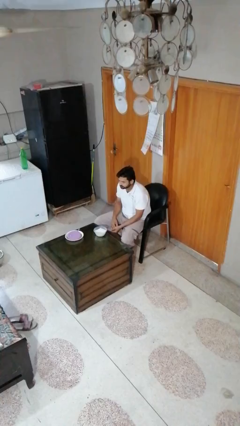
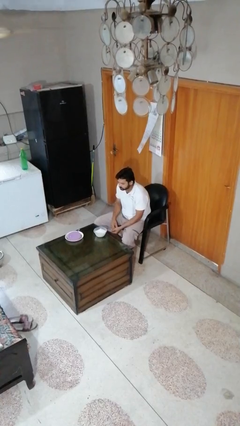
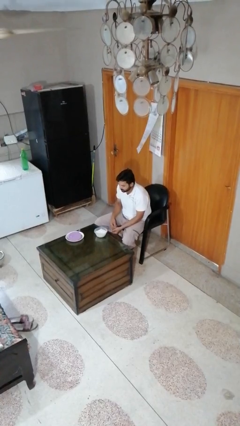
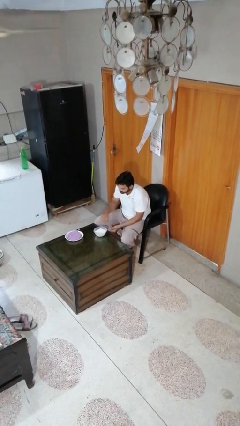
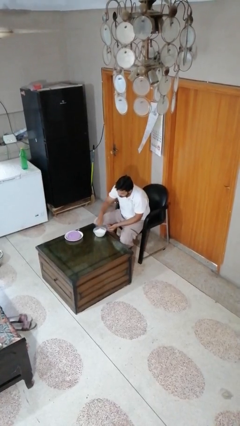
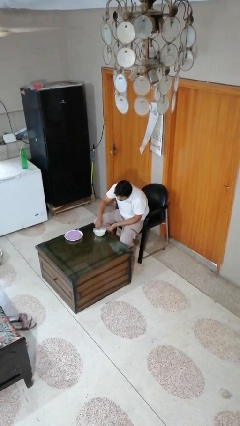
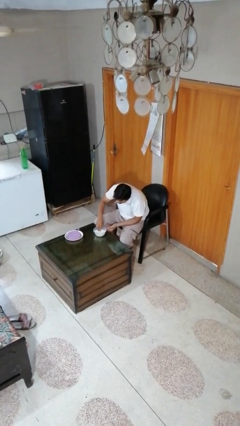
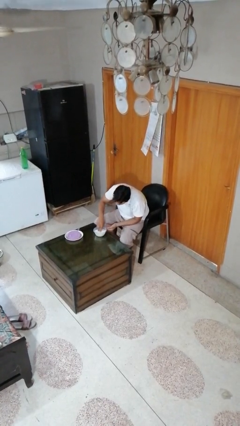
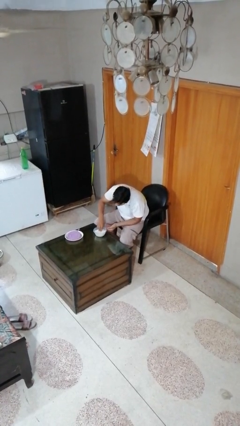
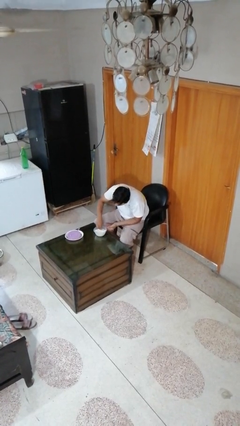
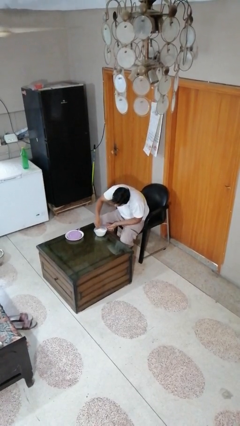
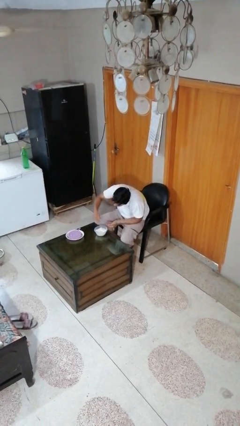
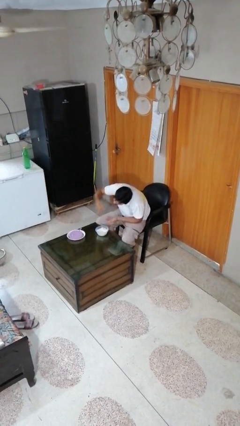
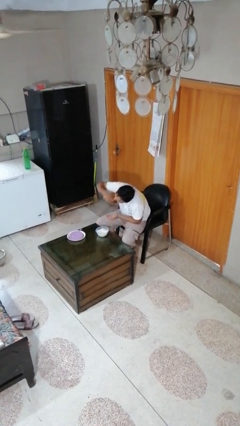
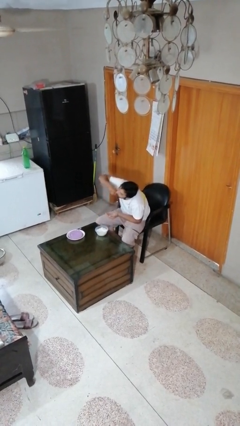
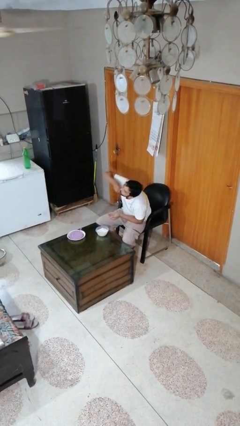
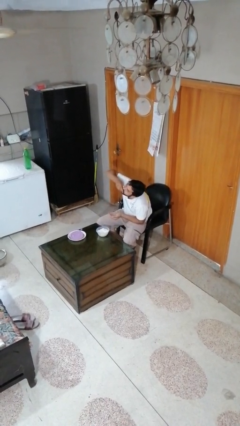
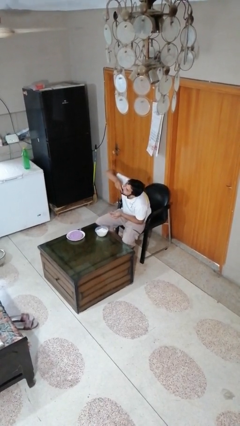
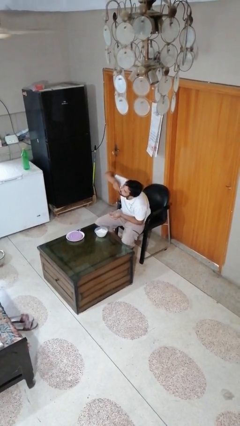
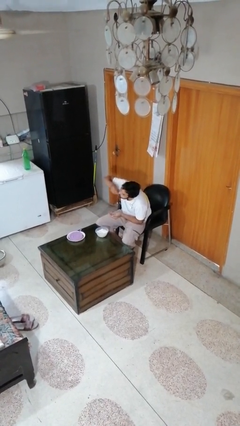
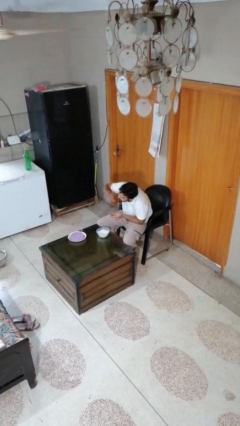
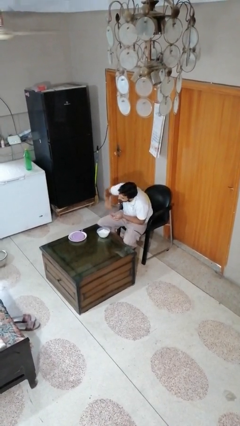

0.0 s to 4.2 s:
person eats with hands

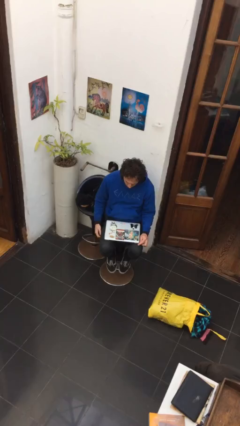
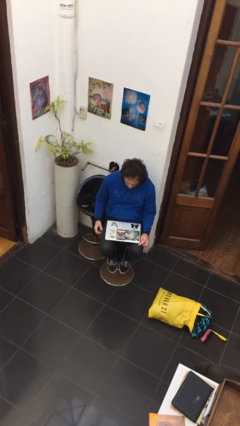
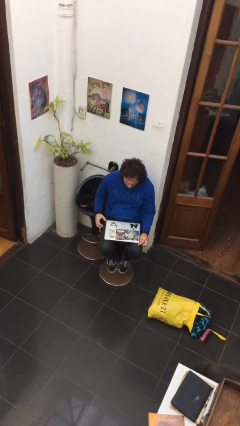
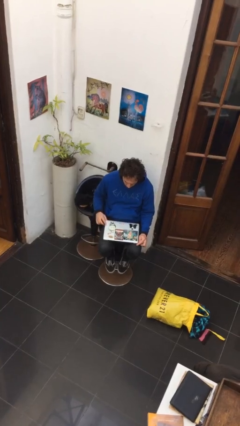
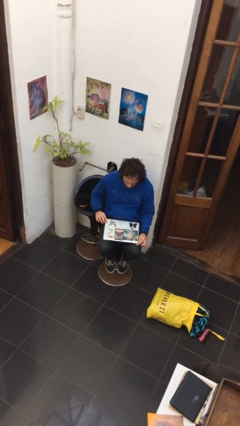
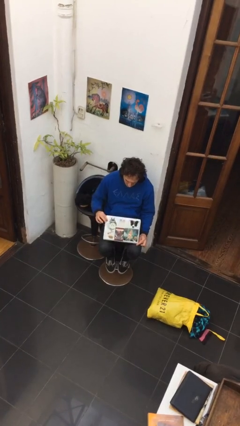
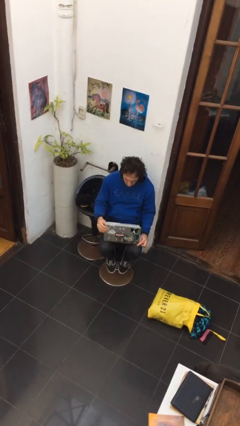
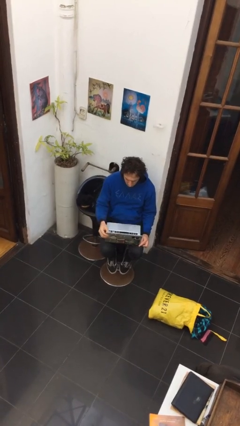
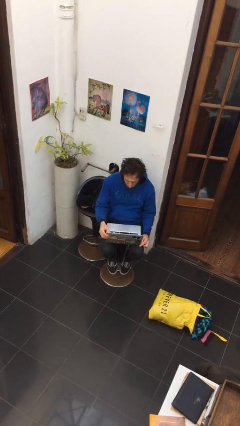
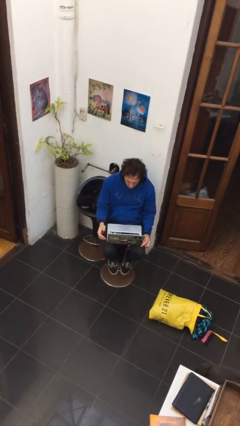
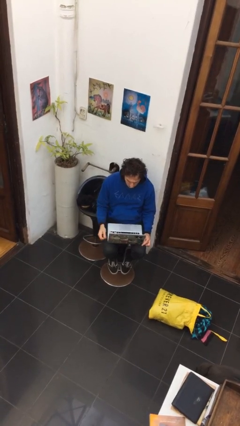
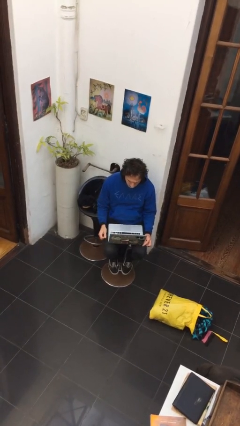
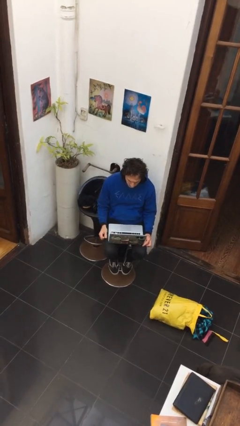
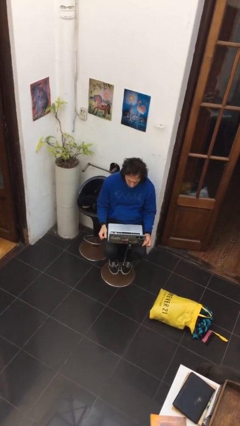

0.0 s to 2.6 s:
person opens laptop

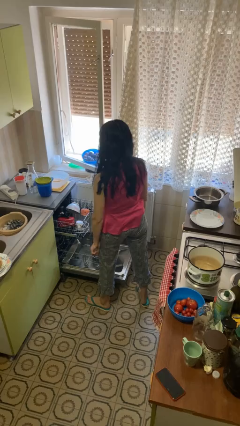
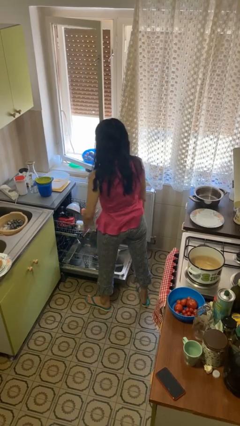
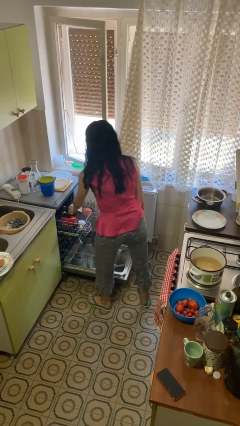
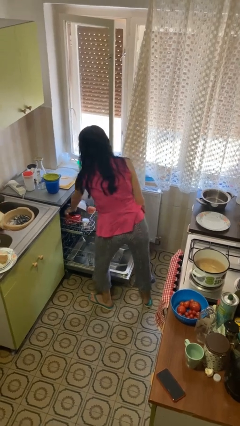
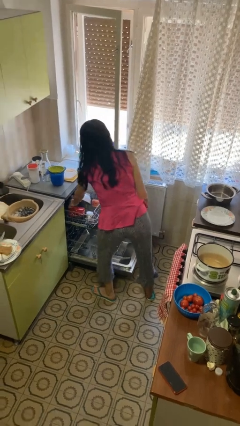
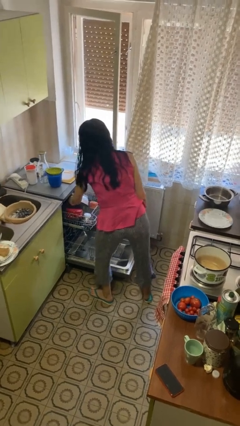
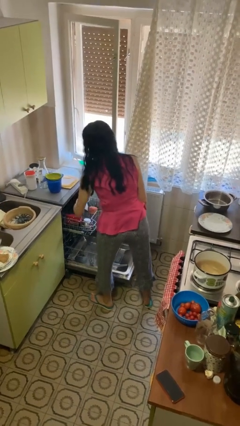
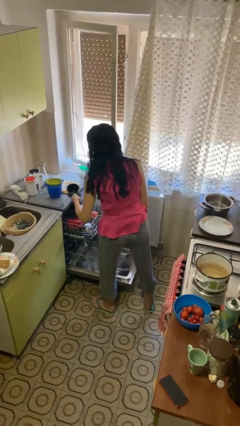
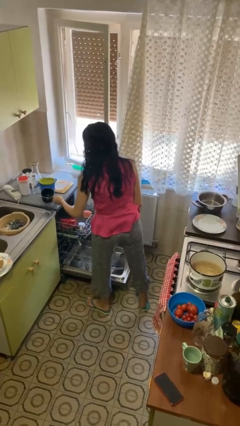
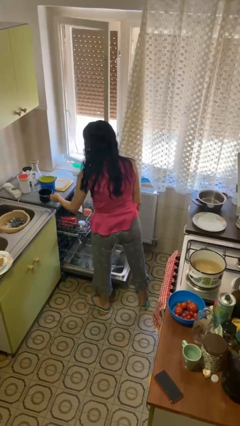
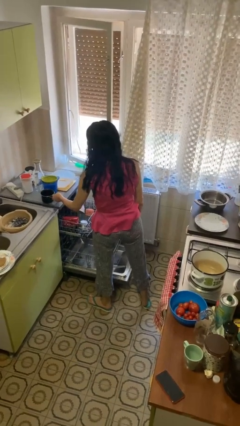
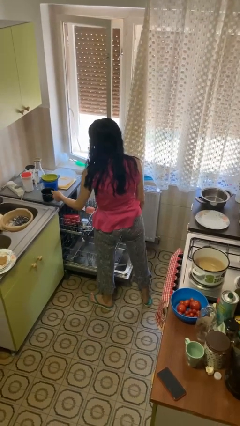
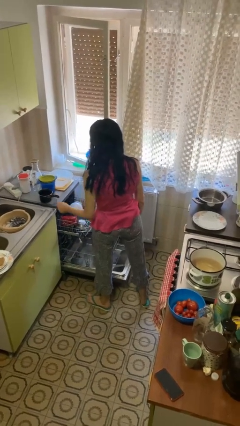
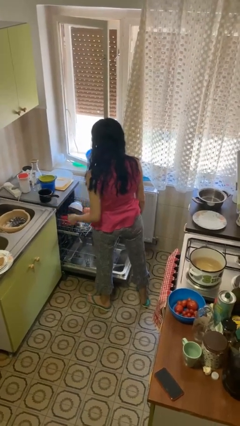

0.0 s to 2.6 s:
person unloads dishwasher

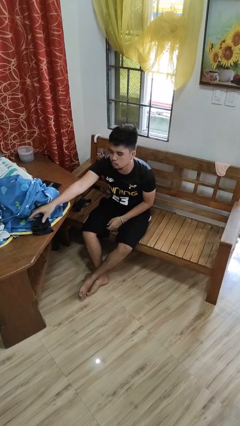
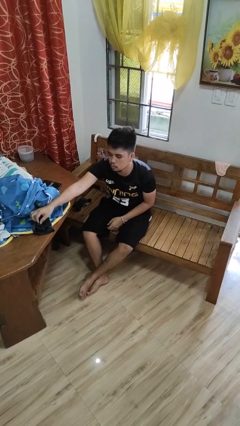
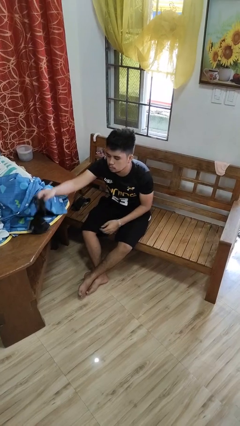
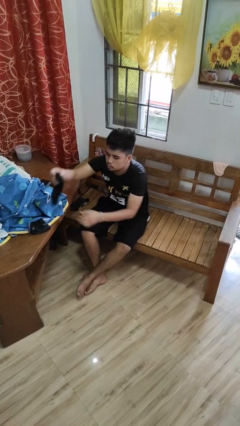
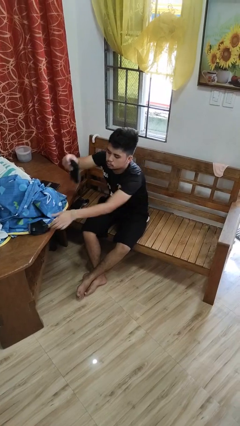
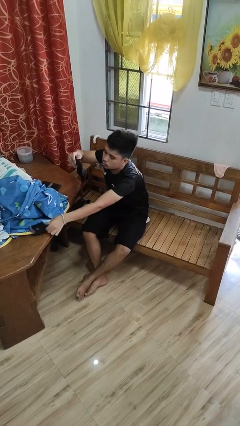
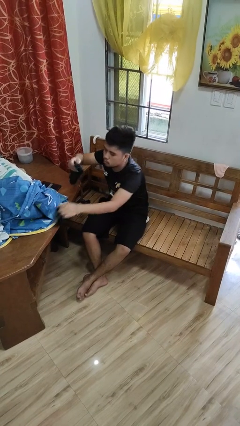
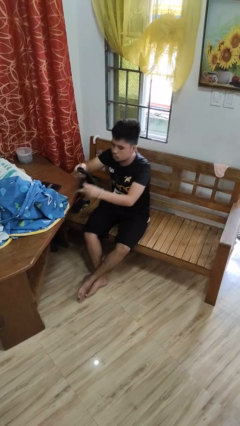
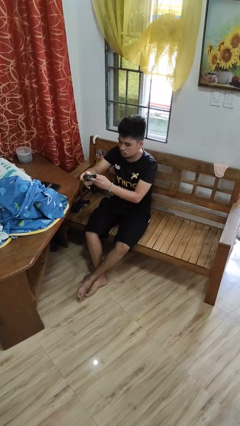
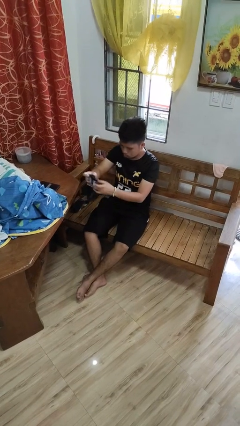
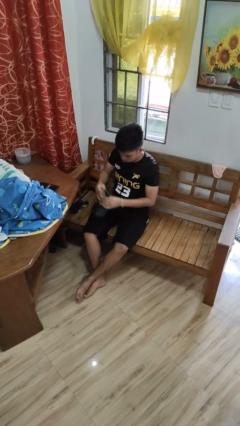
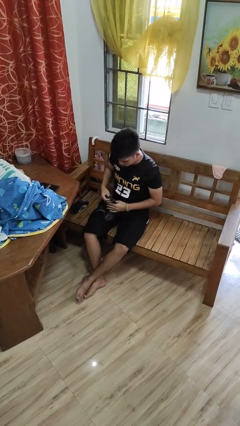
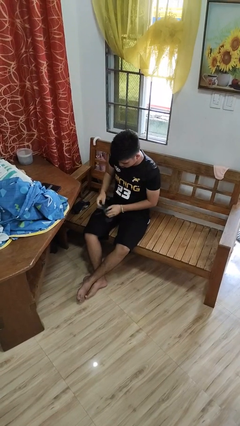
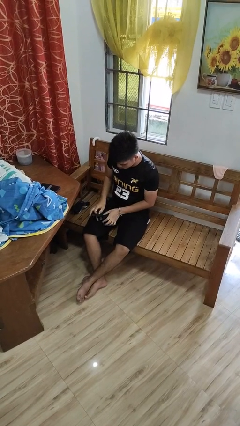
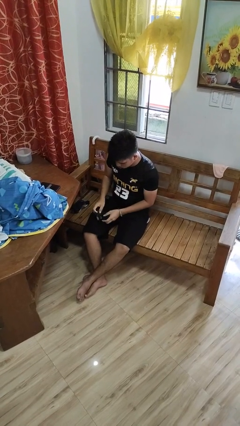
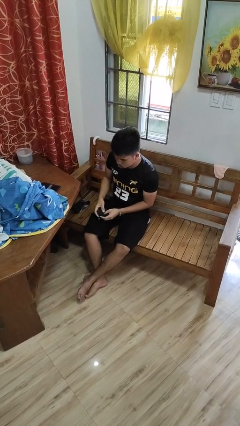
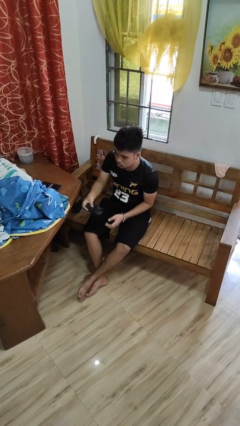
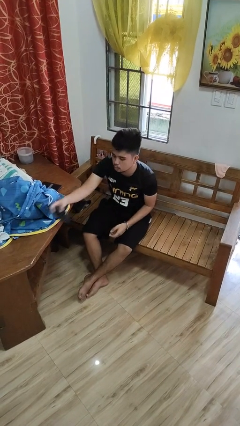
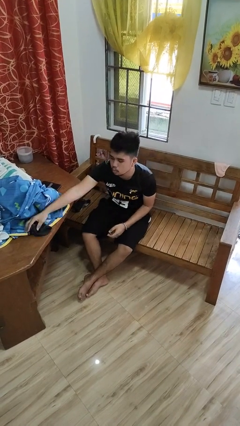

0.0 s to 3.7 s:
person folds socks

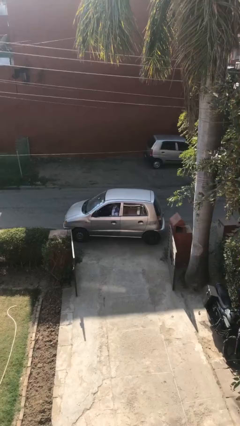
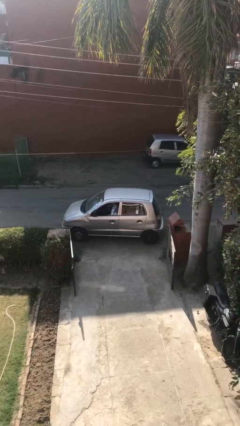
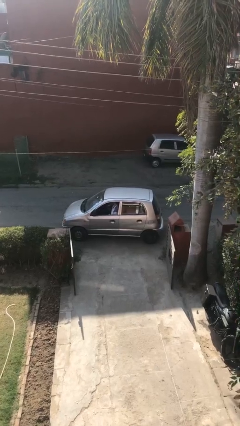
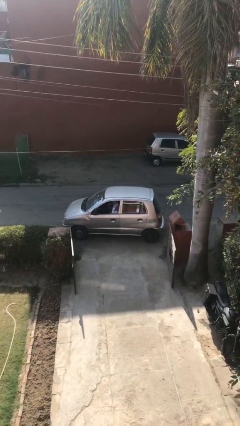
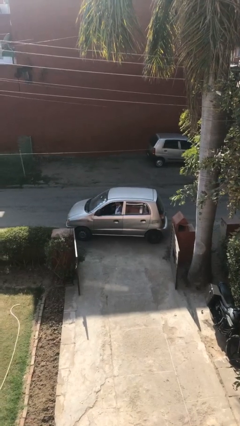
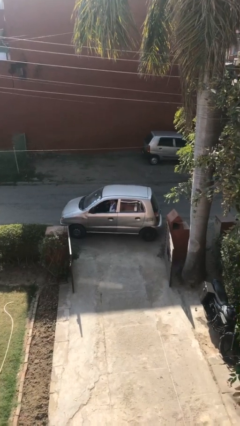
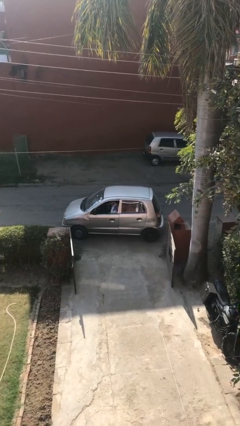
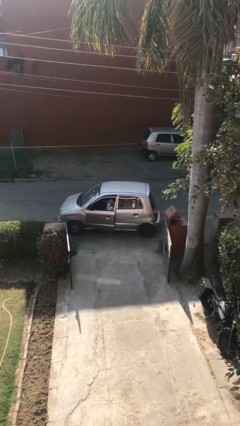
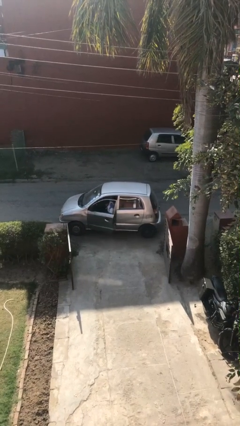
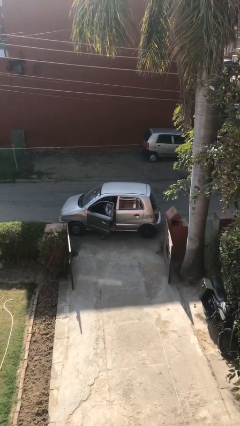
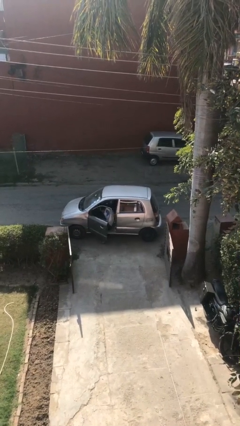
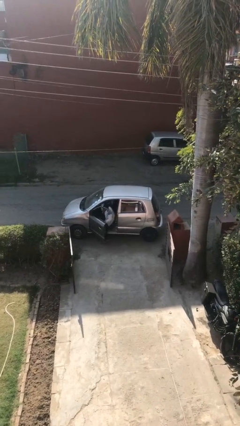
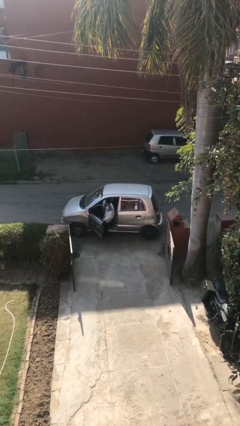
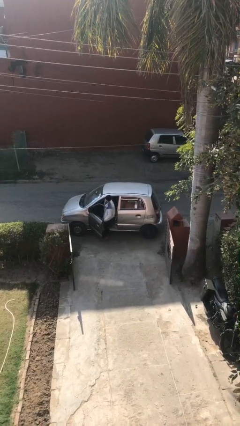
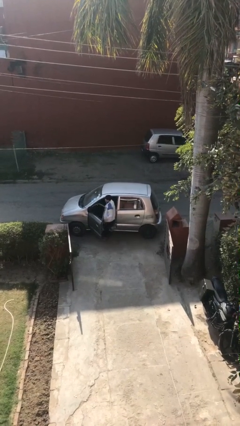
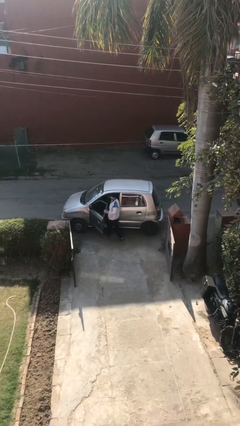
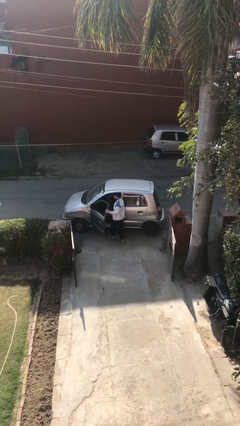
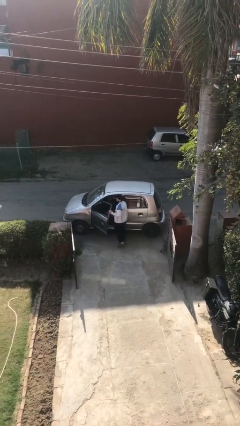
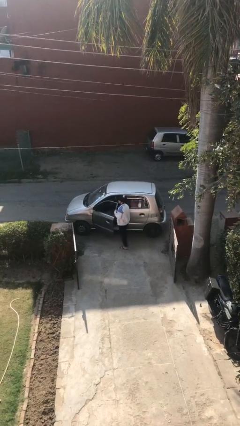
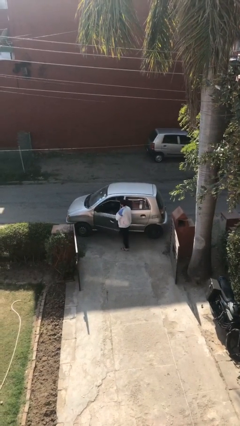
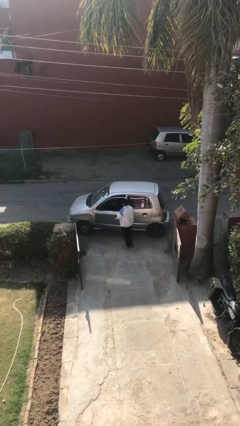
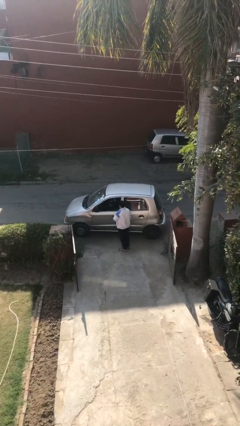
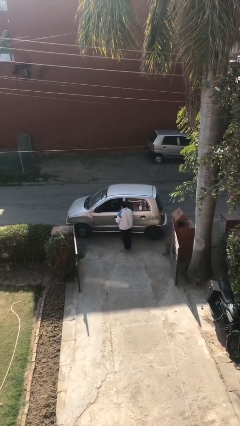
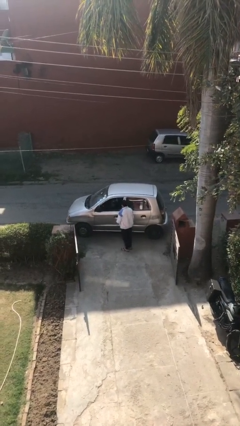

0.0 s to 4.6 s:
car drops off person
